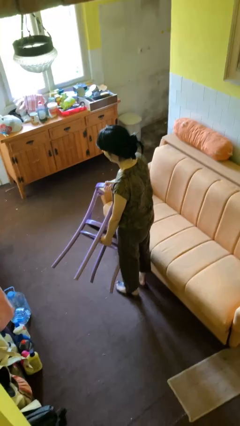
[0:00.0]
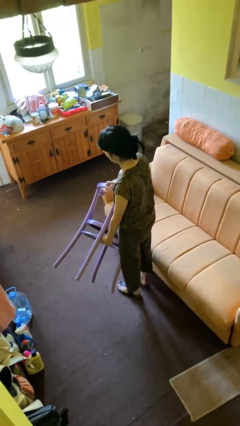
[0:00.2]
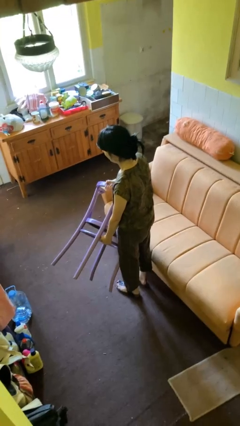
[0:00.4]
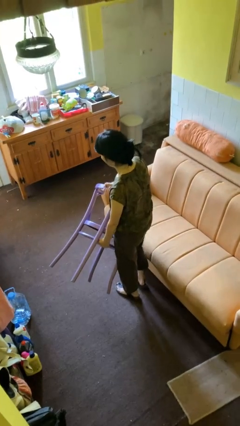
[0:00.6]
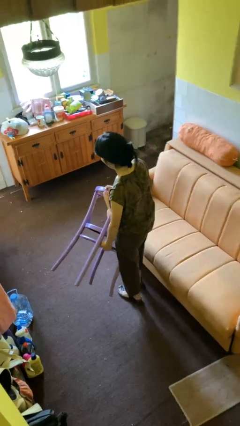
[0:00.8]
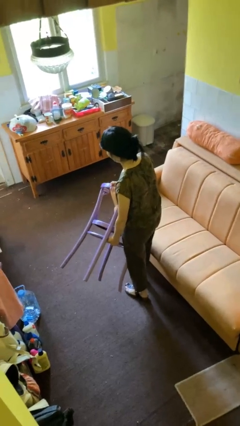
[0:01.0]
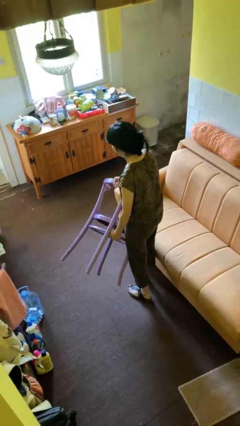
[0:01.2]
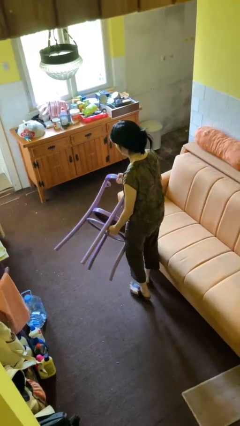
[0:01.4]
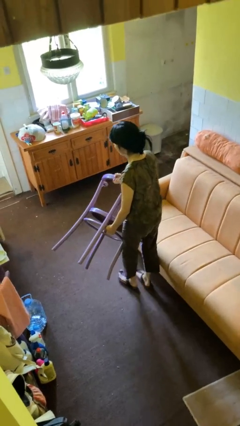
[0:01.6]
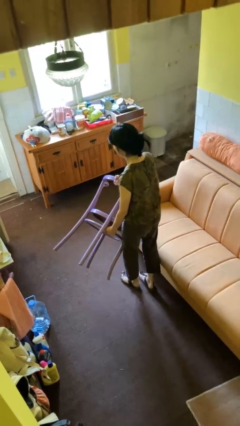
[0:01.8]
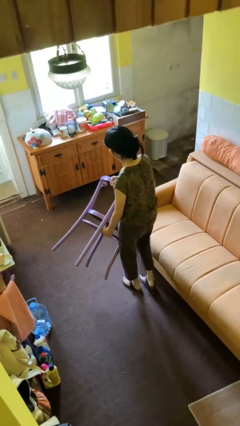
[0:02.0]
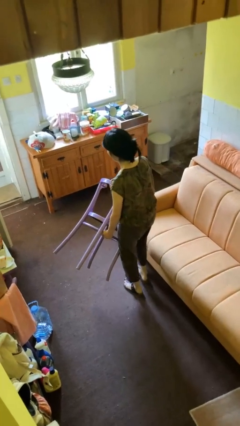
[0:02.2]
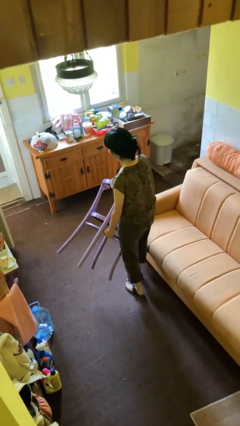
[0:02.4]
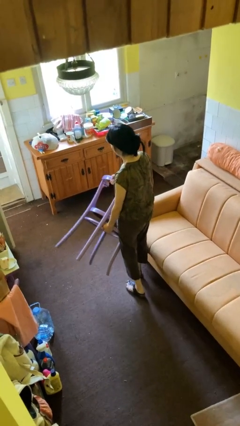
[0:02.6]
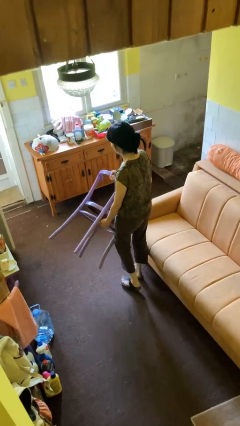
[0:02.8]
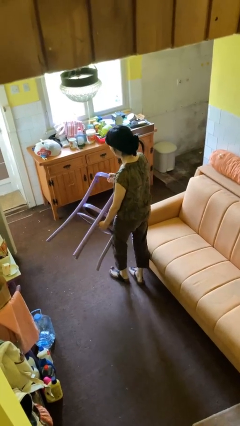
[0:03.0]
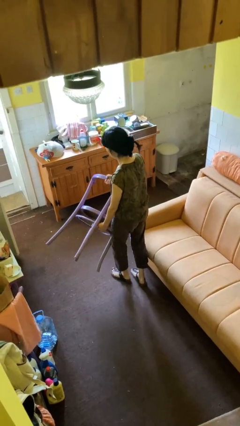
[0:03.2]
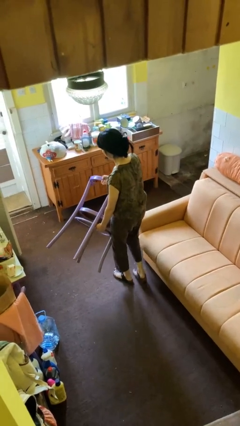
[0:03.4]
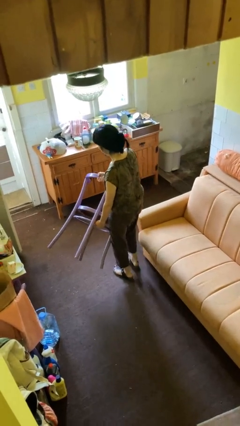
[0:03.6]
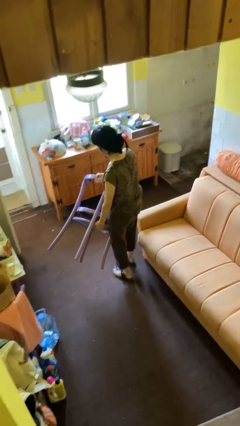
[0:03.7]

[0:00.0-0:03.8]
person carries furniture

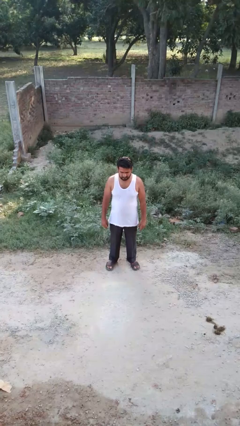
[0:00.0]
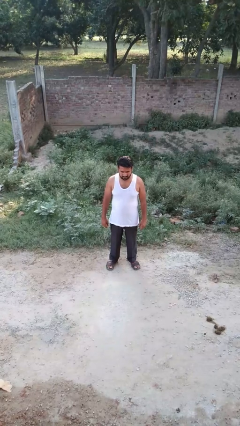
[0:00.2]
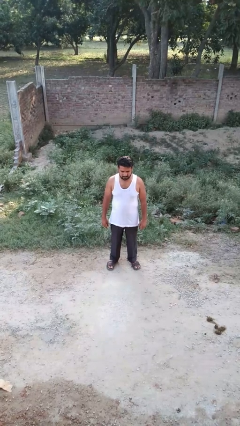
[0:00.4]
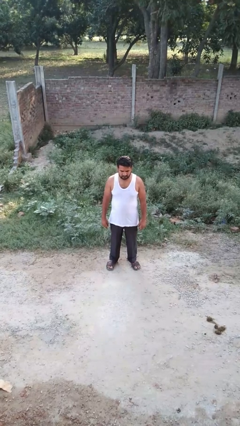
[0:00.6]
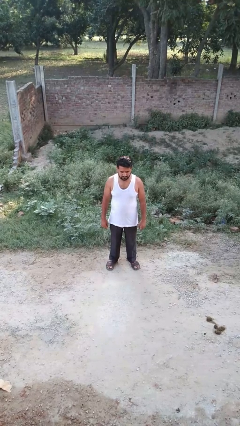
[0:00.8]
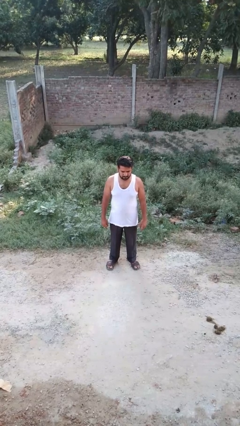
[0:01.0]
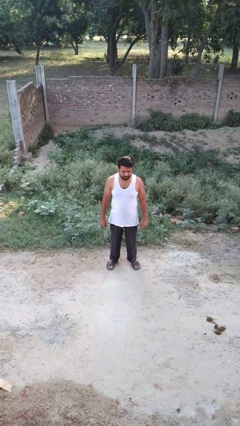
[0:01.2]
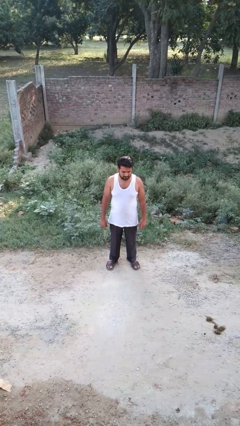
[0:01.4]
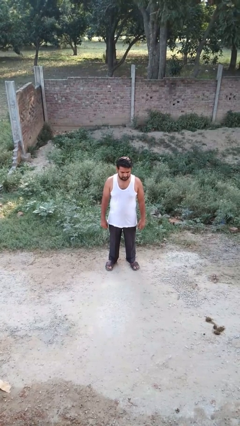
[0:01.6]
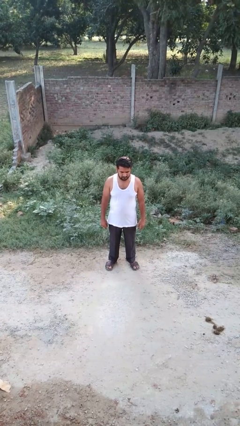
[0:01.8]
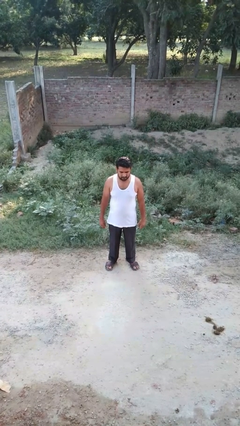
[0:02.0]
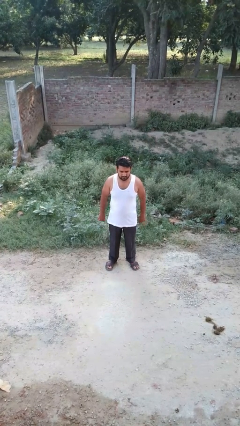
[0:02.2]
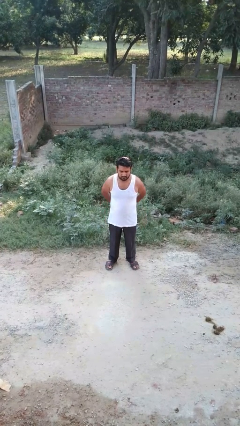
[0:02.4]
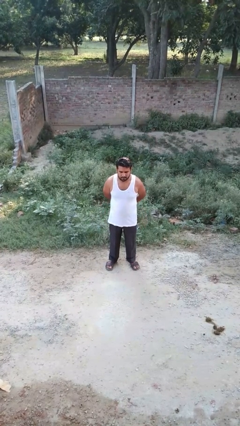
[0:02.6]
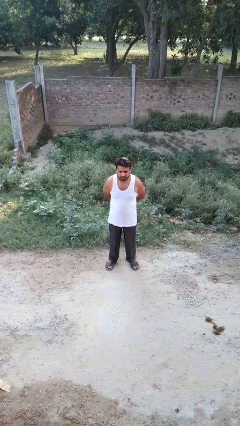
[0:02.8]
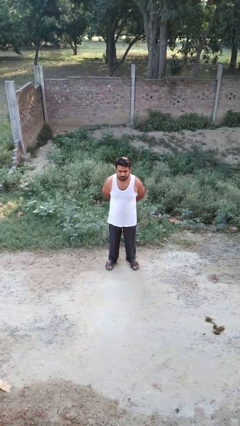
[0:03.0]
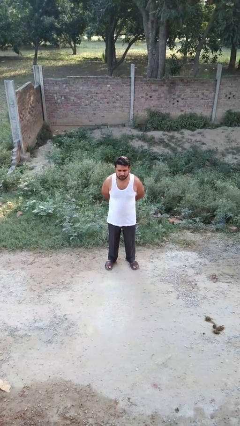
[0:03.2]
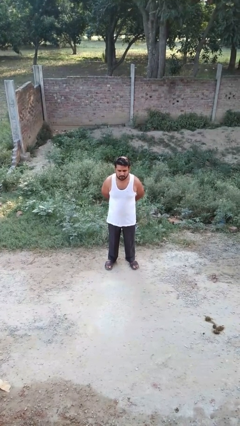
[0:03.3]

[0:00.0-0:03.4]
person stretches back

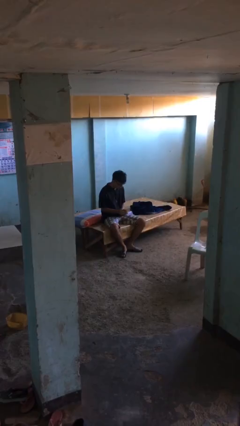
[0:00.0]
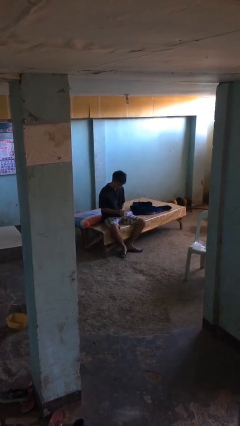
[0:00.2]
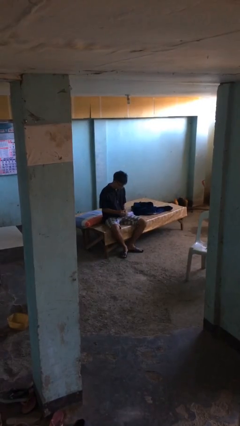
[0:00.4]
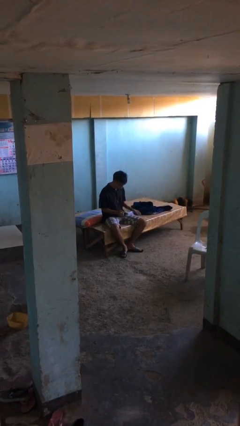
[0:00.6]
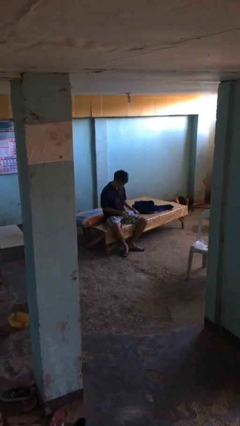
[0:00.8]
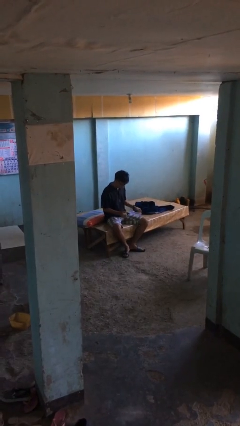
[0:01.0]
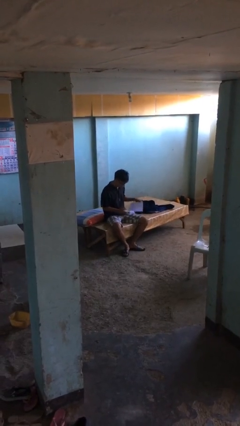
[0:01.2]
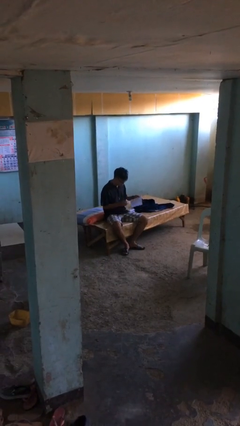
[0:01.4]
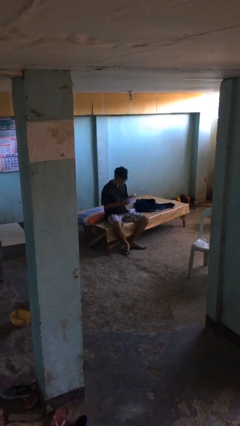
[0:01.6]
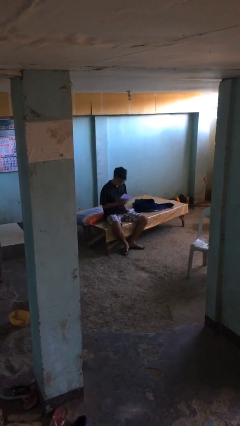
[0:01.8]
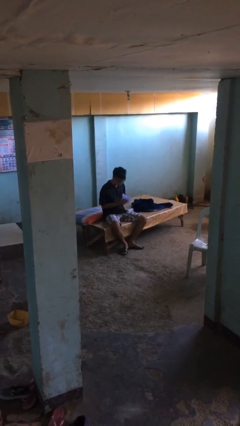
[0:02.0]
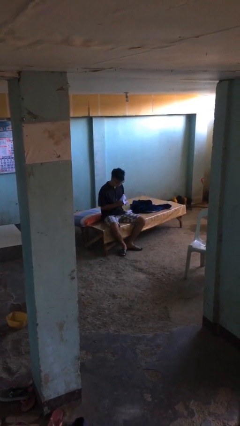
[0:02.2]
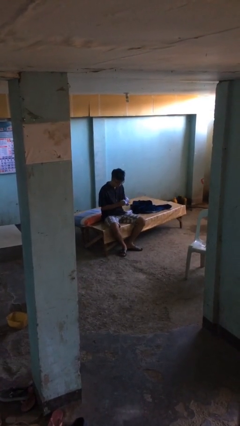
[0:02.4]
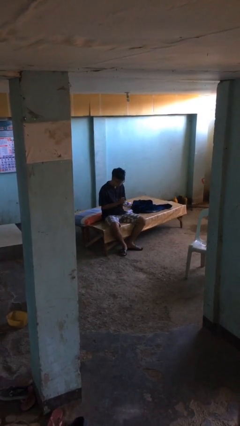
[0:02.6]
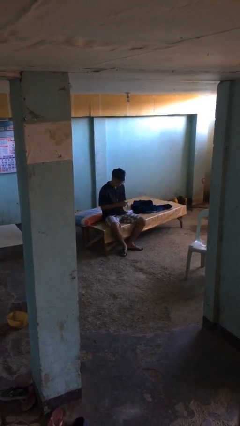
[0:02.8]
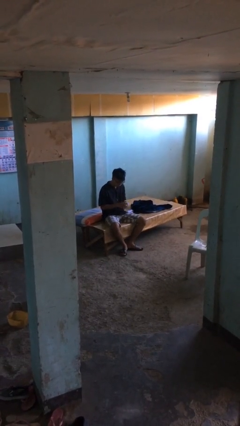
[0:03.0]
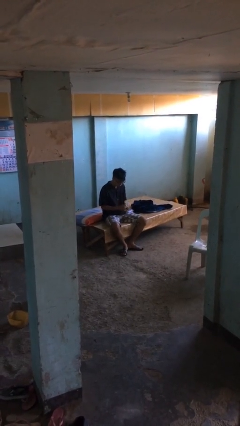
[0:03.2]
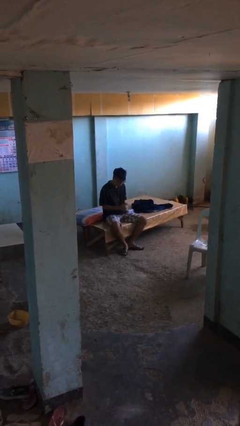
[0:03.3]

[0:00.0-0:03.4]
person crumples paper

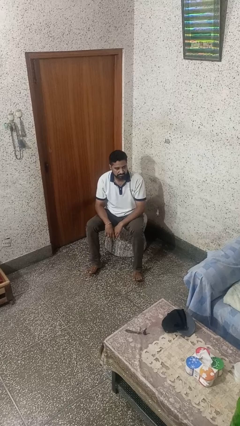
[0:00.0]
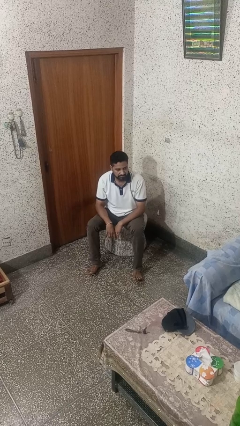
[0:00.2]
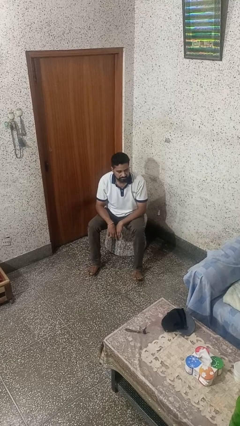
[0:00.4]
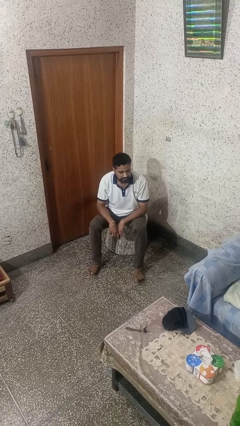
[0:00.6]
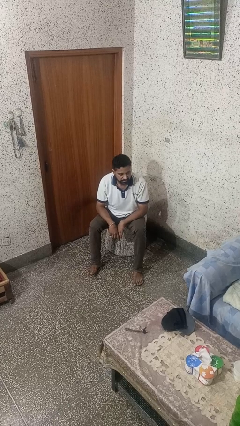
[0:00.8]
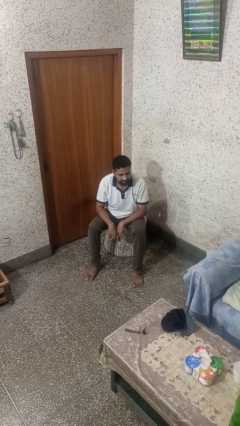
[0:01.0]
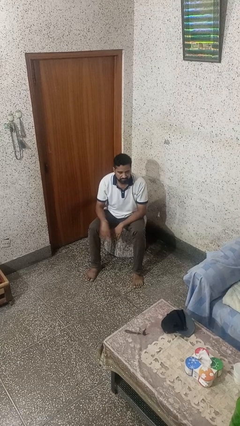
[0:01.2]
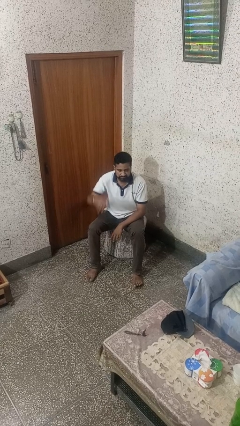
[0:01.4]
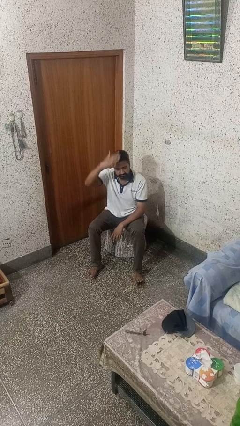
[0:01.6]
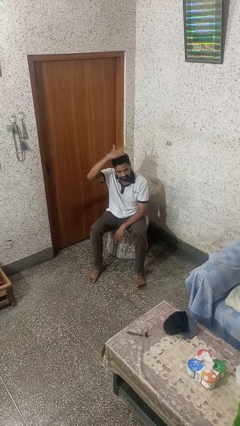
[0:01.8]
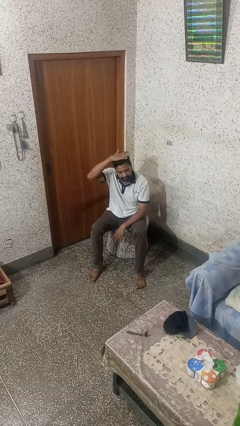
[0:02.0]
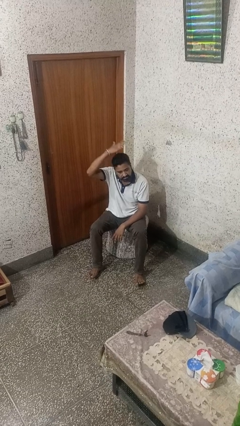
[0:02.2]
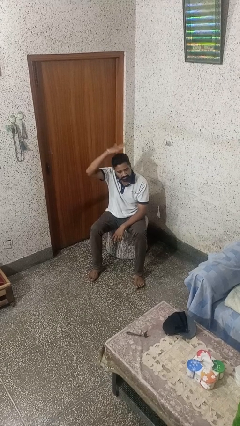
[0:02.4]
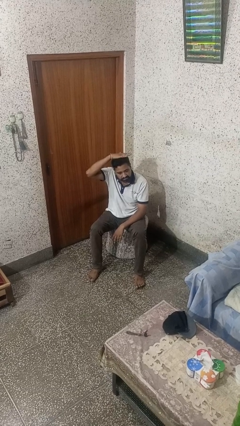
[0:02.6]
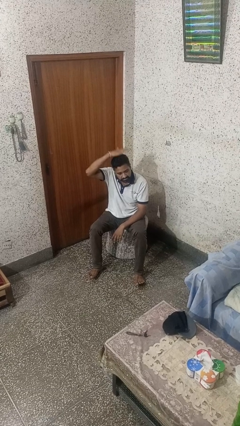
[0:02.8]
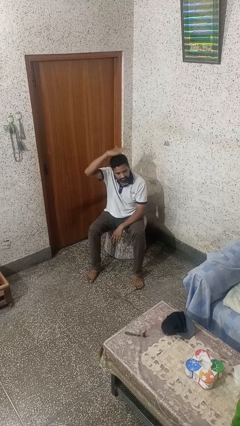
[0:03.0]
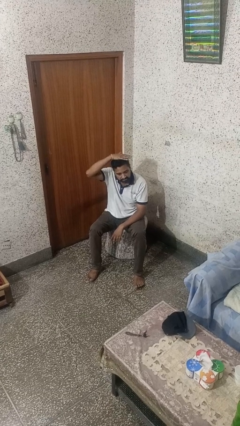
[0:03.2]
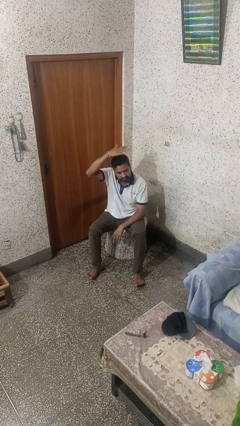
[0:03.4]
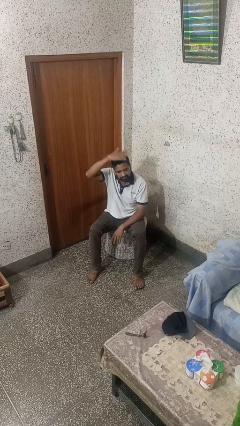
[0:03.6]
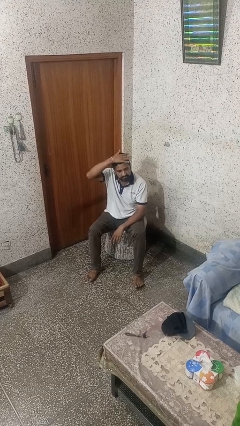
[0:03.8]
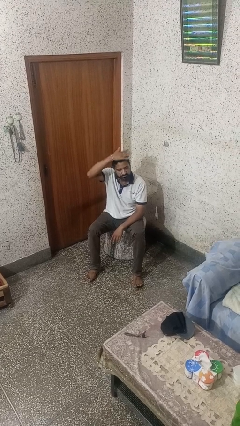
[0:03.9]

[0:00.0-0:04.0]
person gestures cut

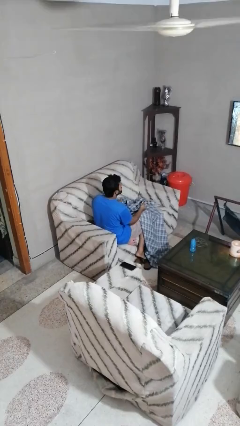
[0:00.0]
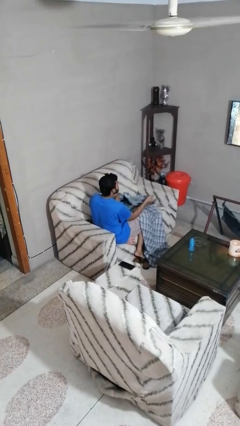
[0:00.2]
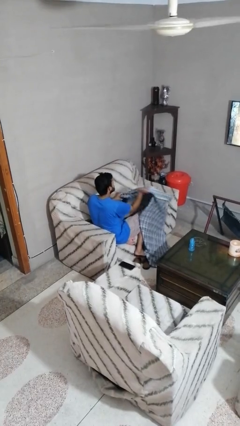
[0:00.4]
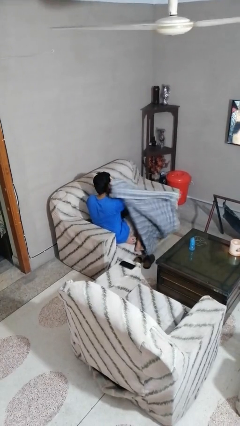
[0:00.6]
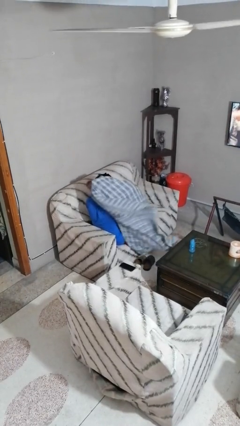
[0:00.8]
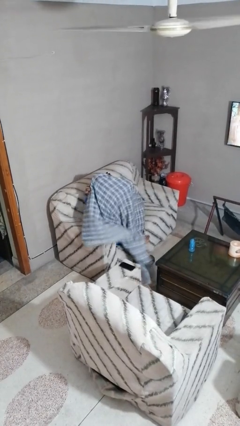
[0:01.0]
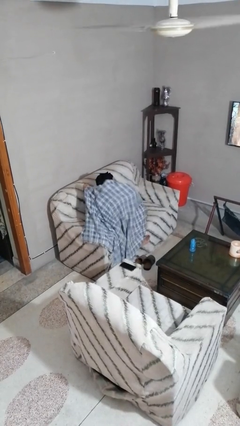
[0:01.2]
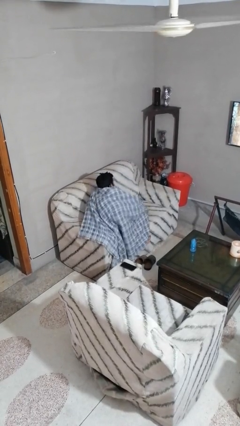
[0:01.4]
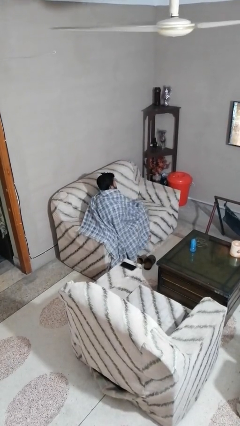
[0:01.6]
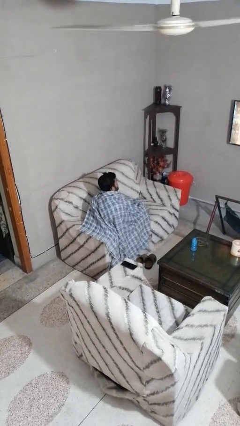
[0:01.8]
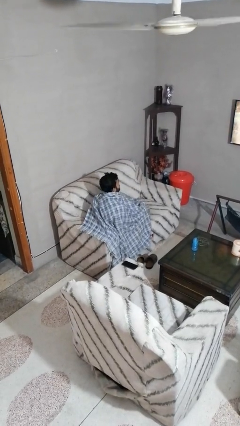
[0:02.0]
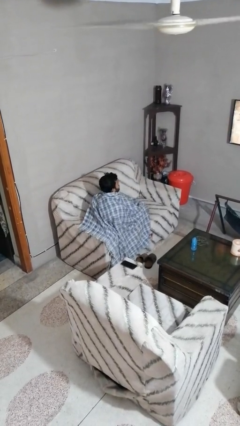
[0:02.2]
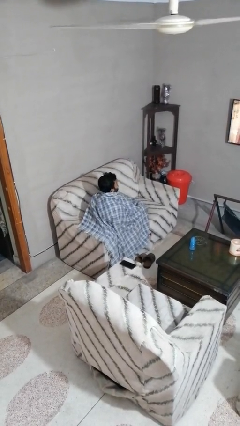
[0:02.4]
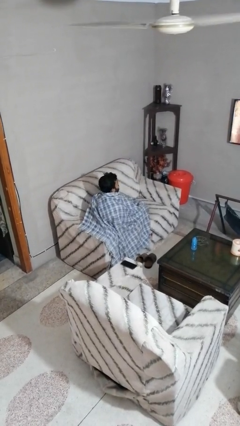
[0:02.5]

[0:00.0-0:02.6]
person covers with blanket

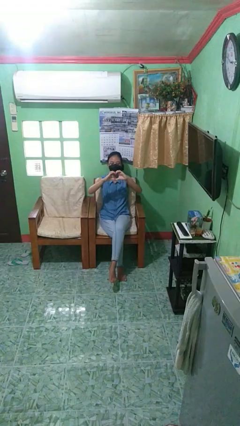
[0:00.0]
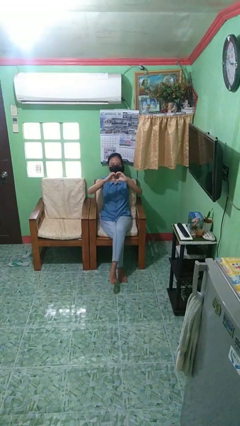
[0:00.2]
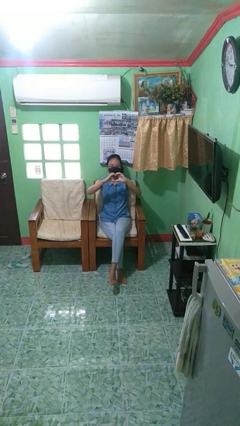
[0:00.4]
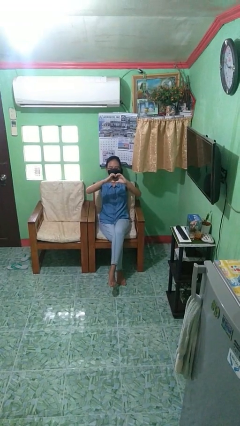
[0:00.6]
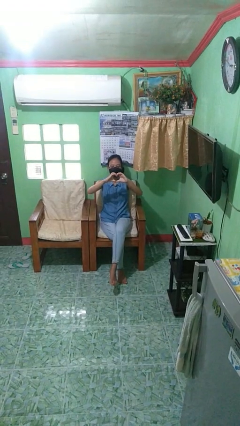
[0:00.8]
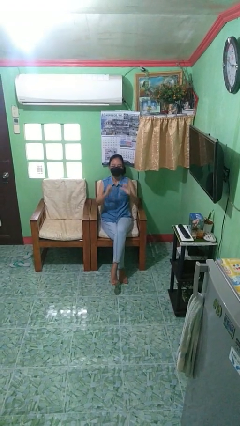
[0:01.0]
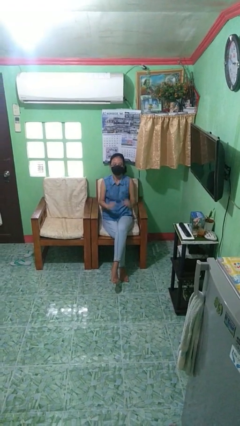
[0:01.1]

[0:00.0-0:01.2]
person gestures heart
